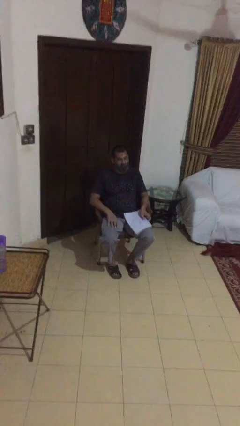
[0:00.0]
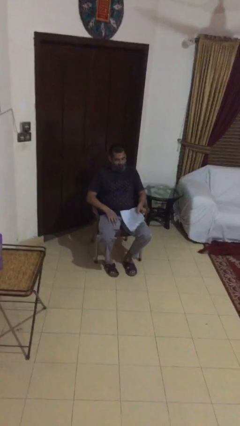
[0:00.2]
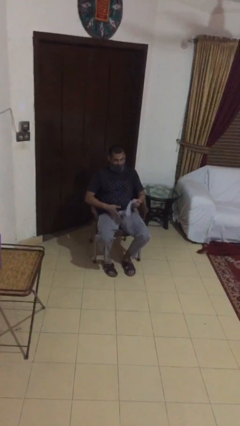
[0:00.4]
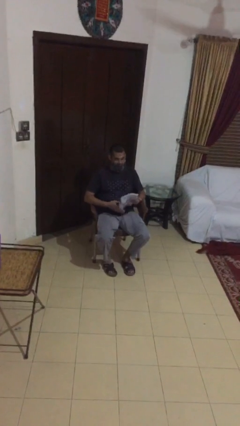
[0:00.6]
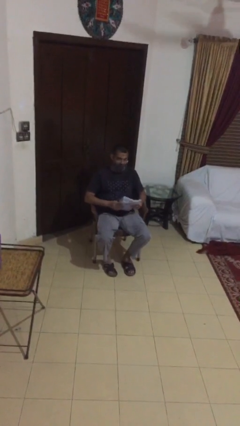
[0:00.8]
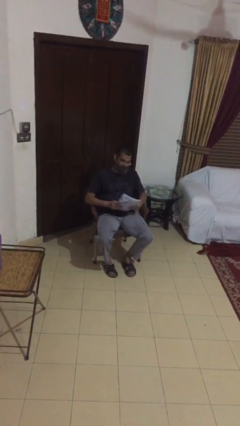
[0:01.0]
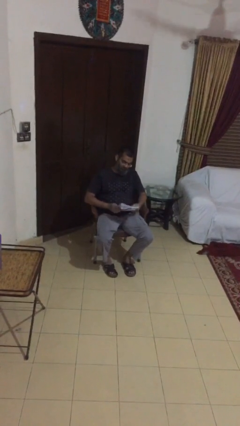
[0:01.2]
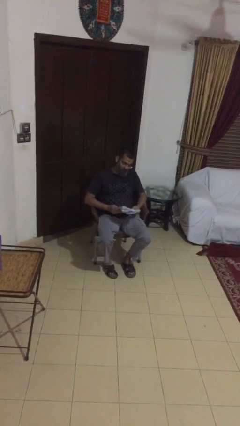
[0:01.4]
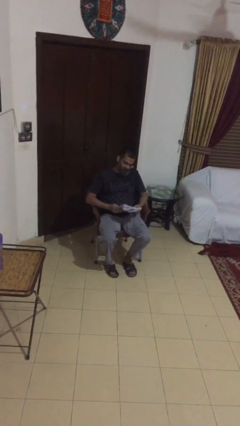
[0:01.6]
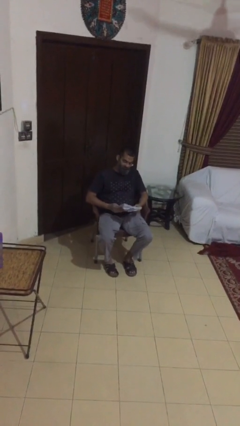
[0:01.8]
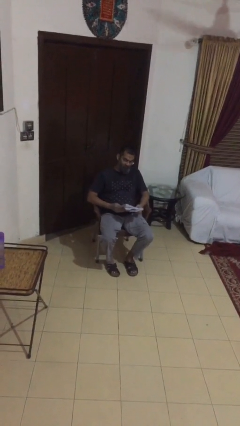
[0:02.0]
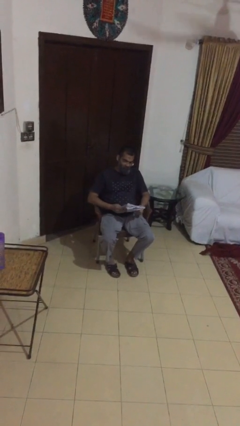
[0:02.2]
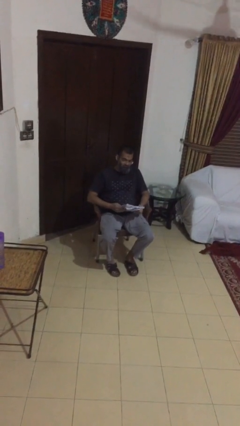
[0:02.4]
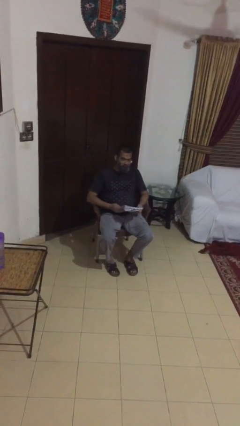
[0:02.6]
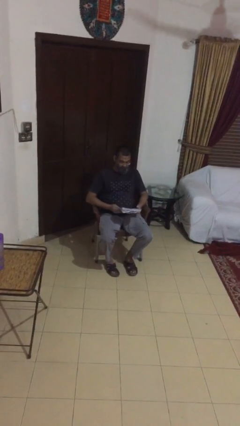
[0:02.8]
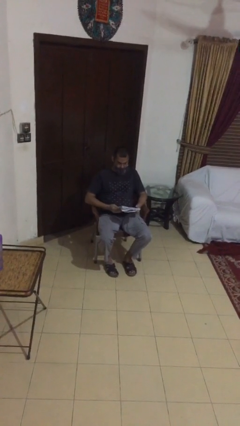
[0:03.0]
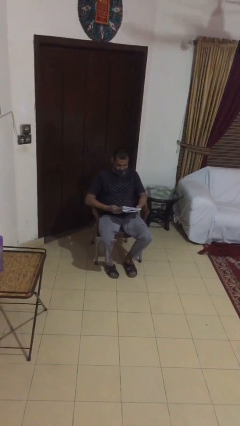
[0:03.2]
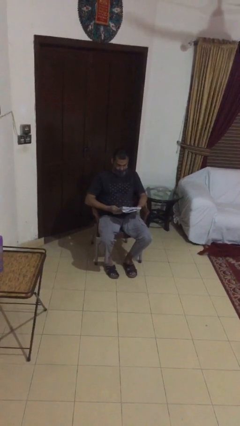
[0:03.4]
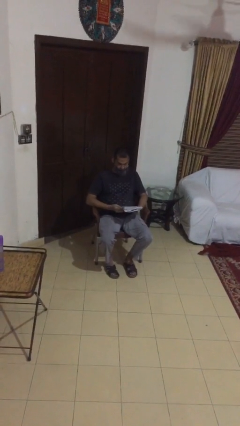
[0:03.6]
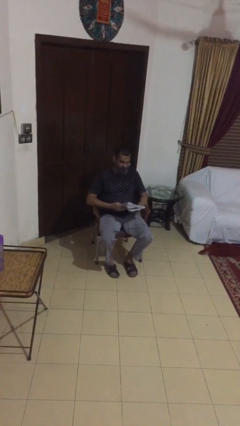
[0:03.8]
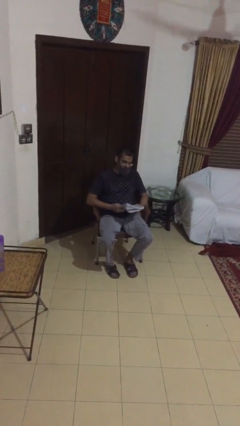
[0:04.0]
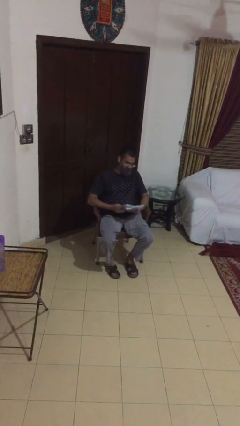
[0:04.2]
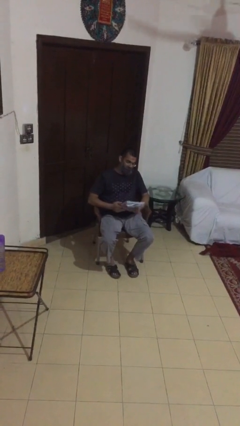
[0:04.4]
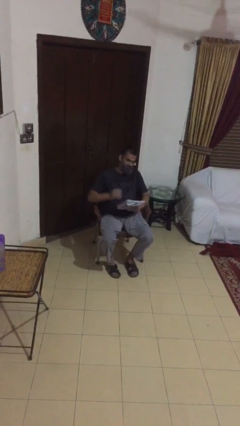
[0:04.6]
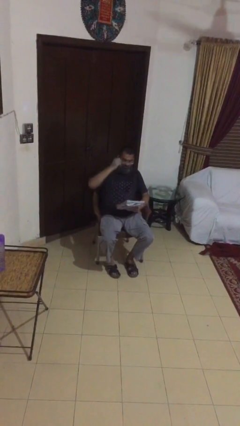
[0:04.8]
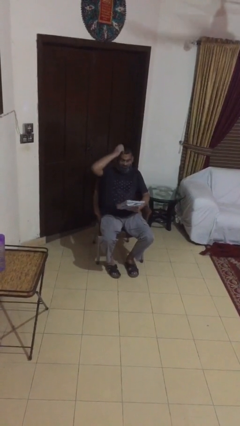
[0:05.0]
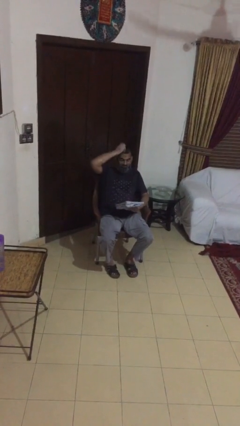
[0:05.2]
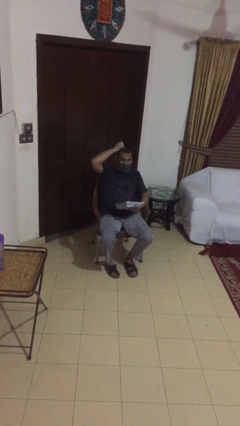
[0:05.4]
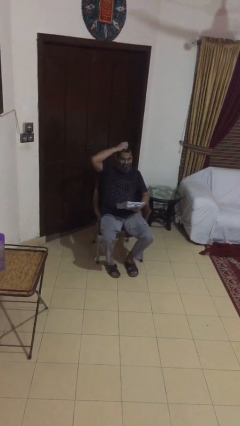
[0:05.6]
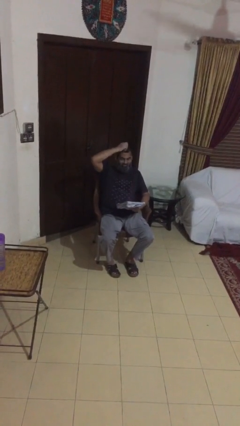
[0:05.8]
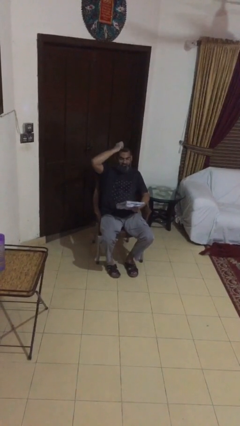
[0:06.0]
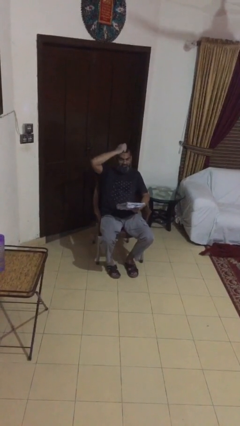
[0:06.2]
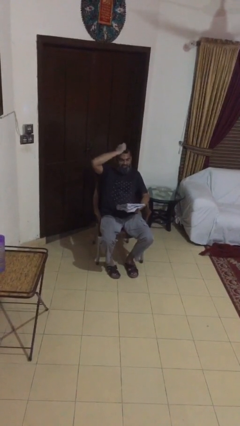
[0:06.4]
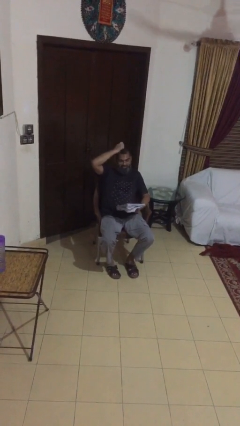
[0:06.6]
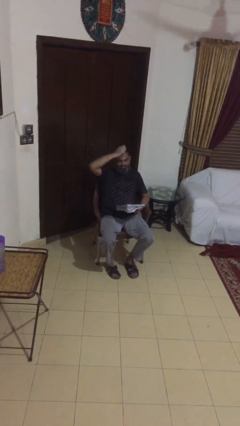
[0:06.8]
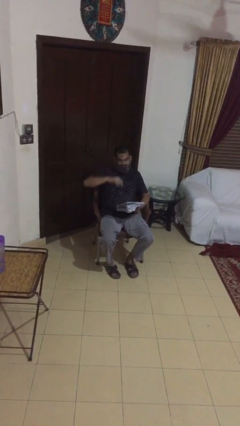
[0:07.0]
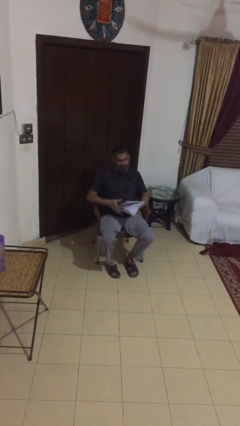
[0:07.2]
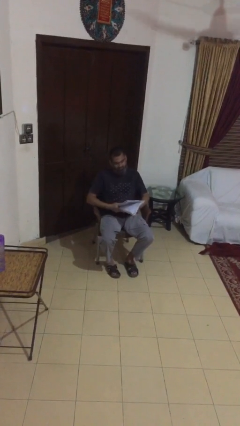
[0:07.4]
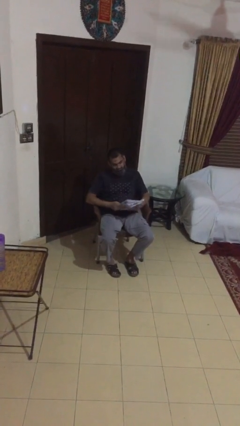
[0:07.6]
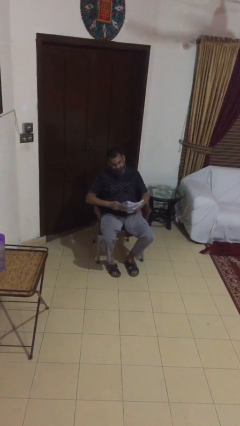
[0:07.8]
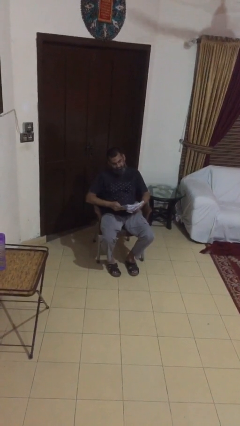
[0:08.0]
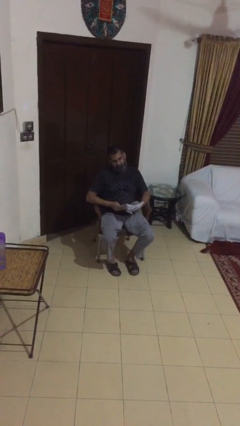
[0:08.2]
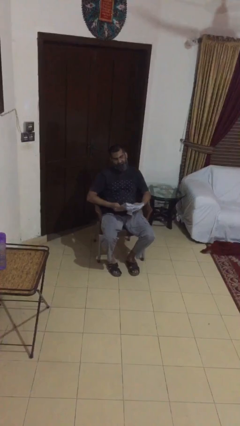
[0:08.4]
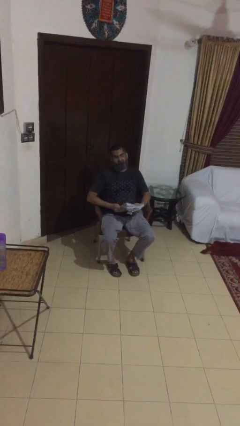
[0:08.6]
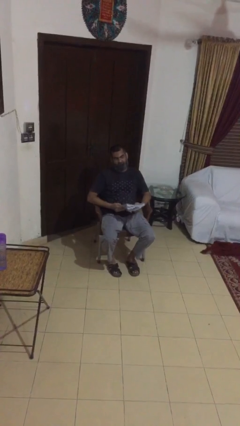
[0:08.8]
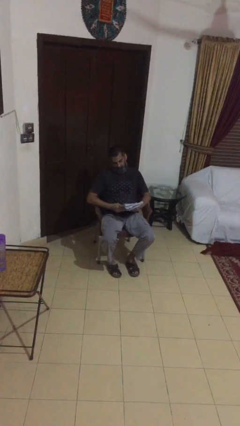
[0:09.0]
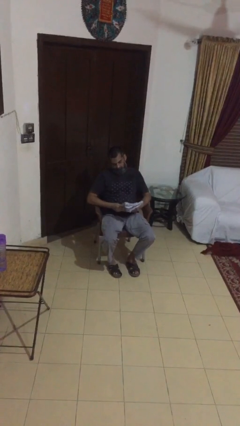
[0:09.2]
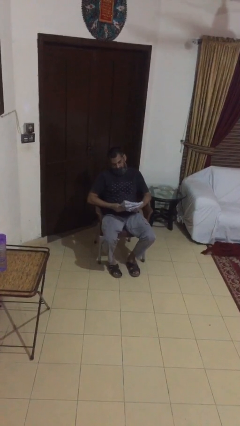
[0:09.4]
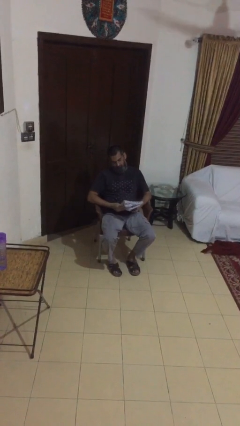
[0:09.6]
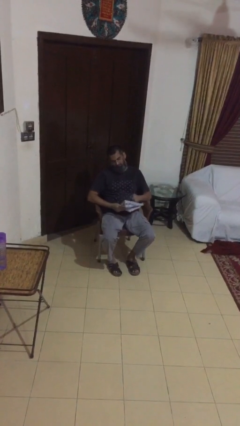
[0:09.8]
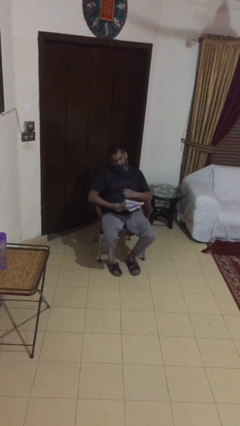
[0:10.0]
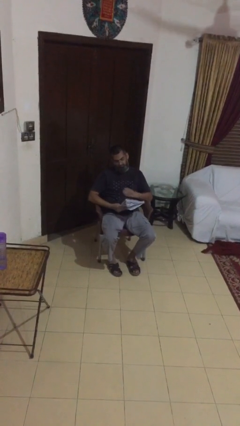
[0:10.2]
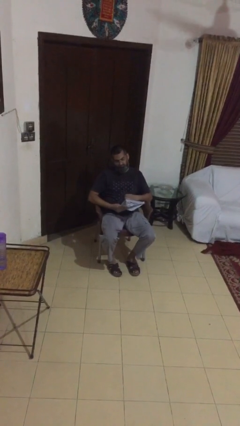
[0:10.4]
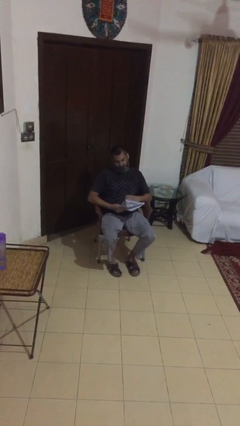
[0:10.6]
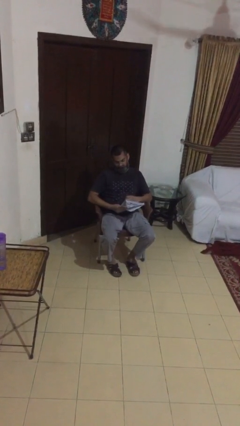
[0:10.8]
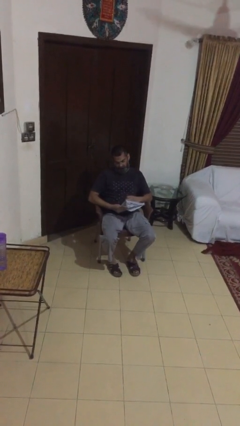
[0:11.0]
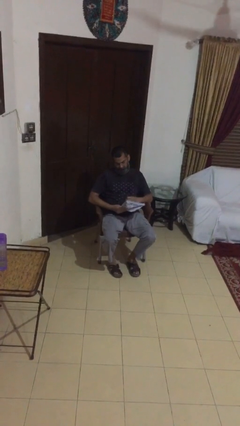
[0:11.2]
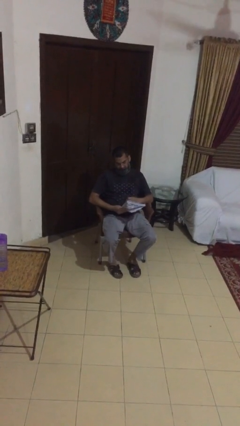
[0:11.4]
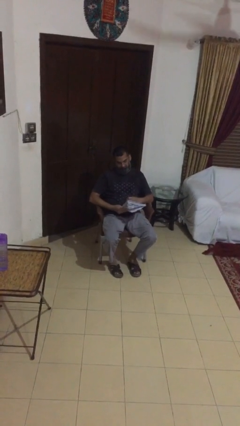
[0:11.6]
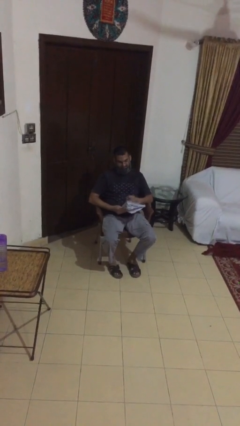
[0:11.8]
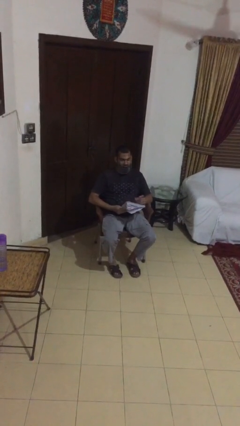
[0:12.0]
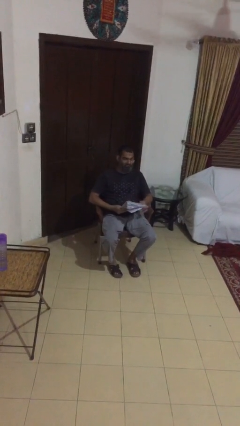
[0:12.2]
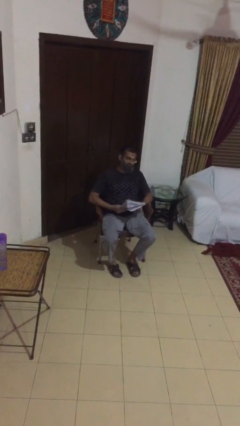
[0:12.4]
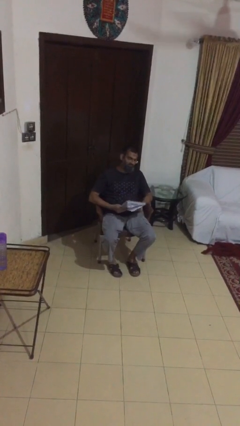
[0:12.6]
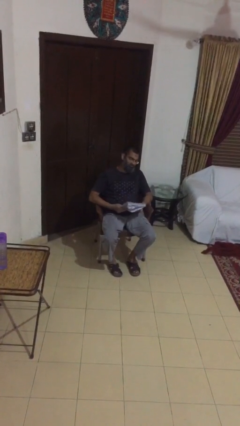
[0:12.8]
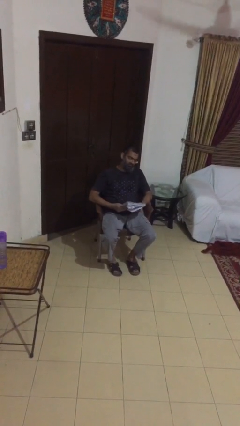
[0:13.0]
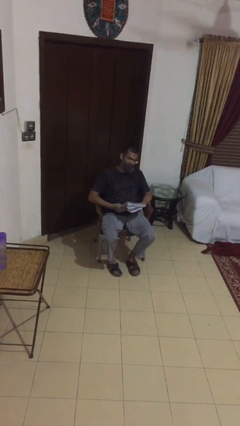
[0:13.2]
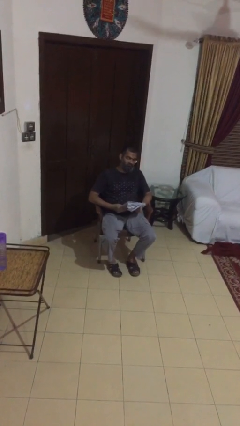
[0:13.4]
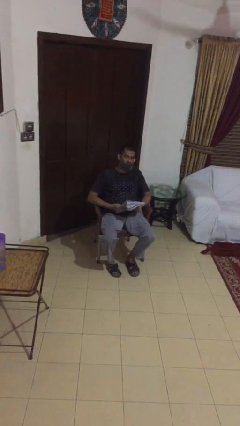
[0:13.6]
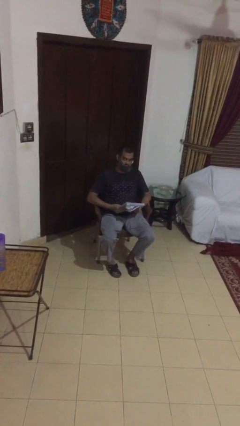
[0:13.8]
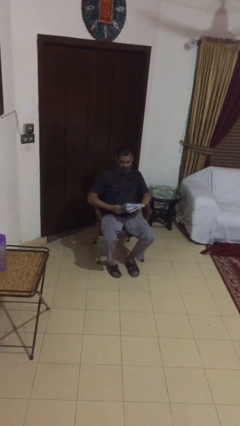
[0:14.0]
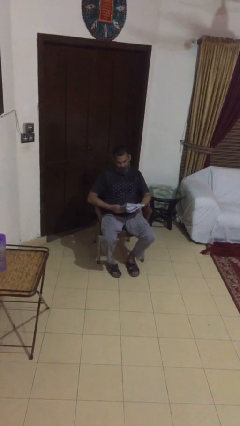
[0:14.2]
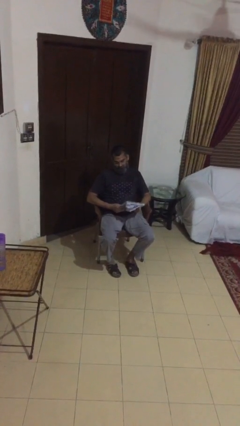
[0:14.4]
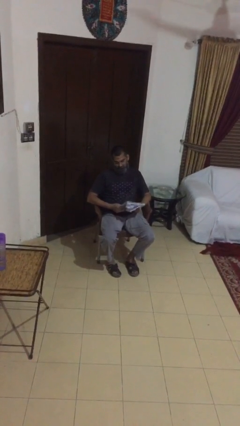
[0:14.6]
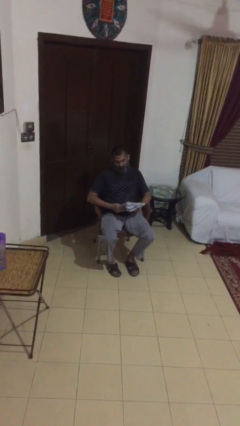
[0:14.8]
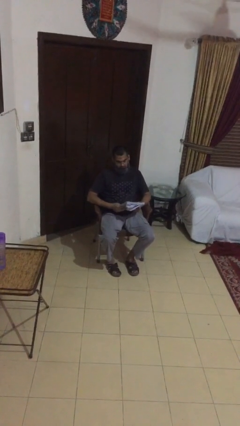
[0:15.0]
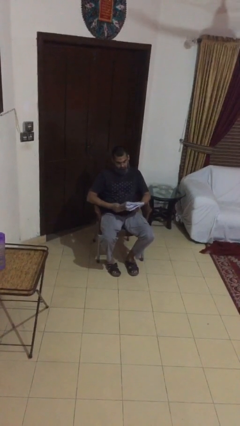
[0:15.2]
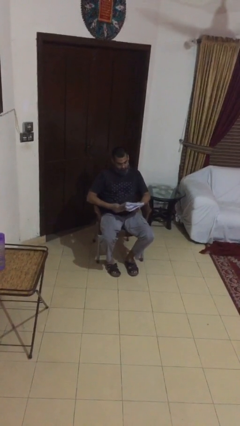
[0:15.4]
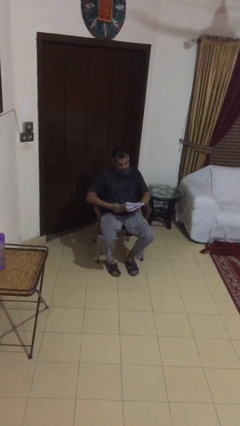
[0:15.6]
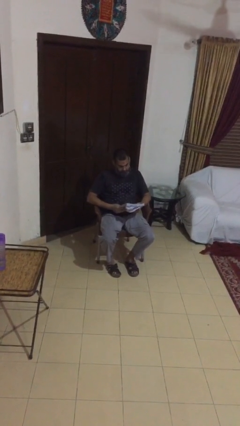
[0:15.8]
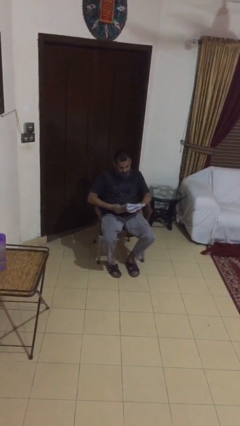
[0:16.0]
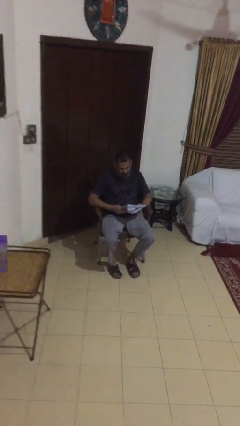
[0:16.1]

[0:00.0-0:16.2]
person reads document

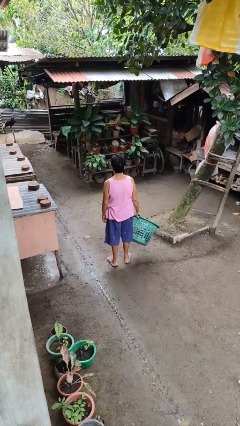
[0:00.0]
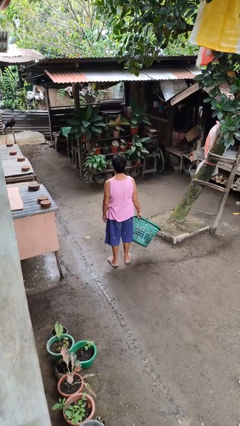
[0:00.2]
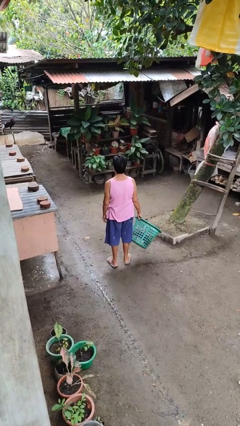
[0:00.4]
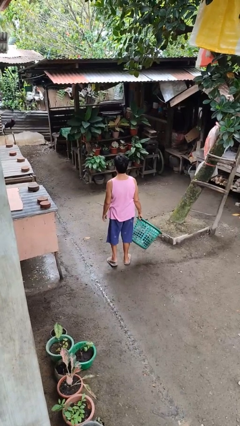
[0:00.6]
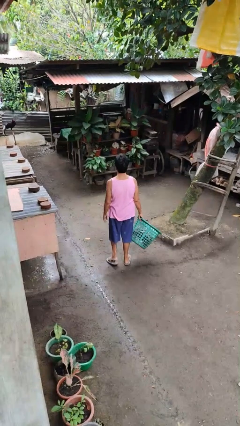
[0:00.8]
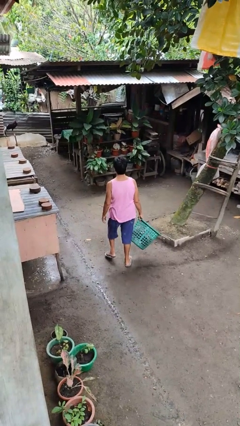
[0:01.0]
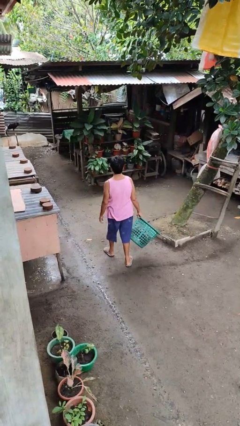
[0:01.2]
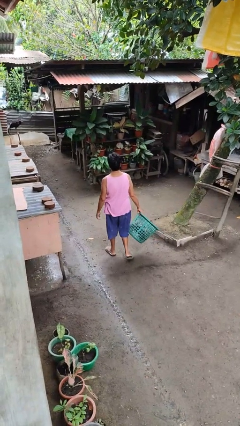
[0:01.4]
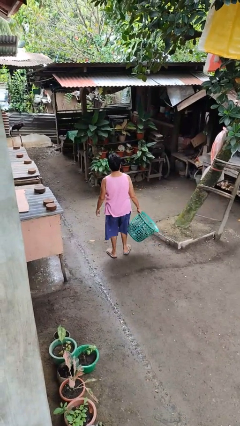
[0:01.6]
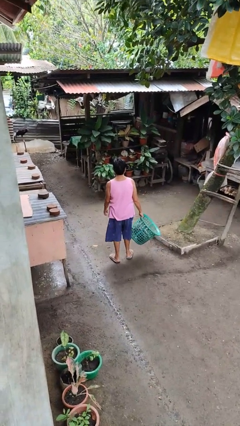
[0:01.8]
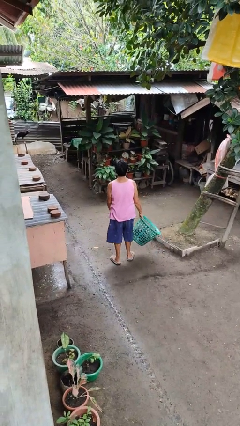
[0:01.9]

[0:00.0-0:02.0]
person carries laundry basket

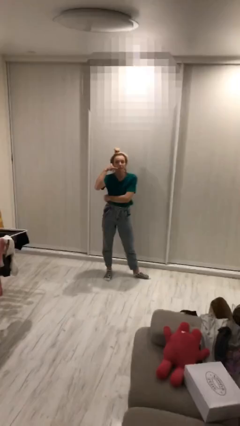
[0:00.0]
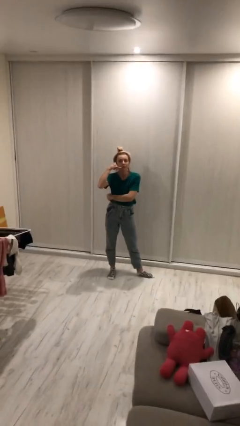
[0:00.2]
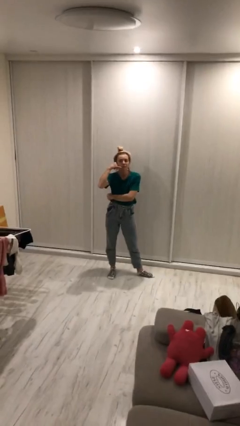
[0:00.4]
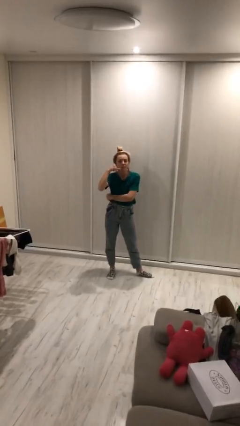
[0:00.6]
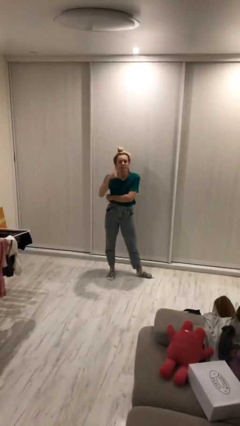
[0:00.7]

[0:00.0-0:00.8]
person gestures call me
